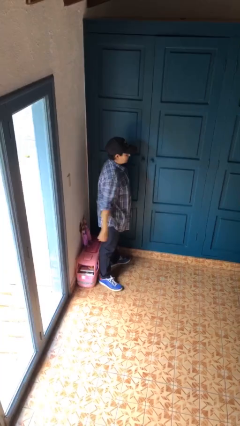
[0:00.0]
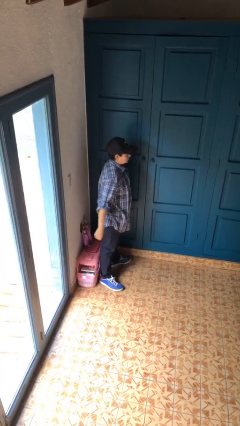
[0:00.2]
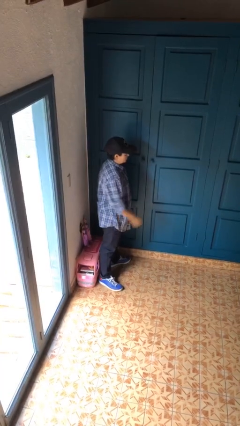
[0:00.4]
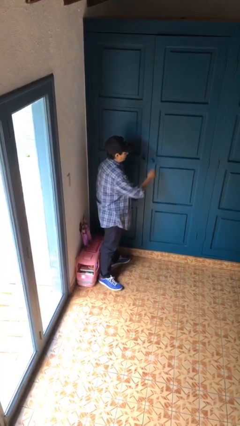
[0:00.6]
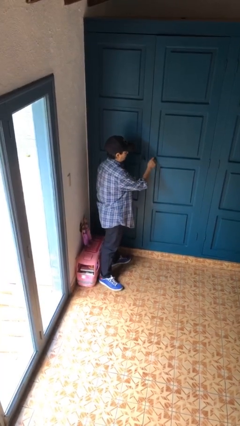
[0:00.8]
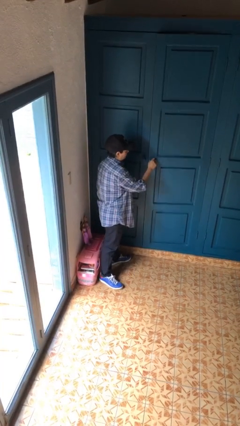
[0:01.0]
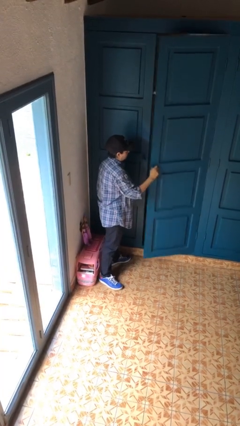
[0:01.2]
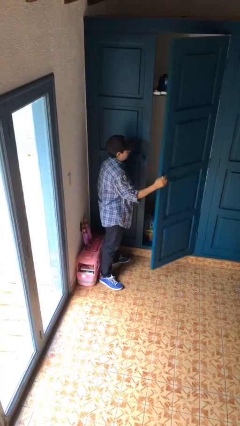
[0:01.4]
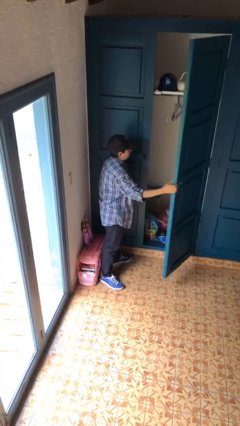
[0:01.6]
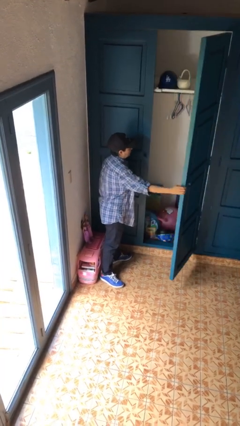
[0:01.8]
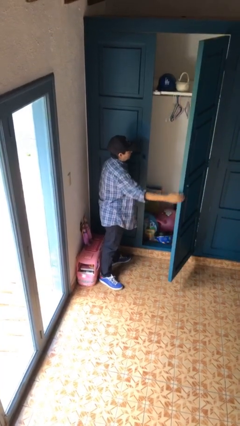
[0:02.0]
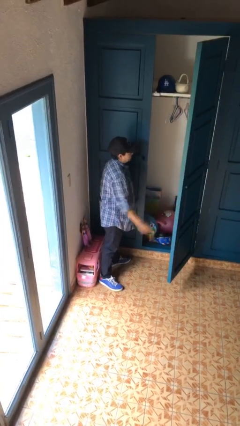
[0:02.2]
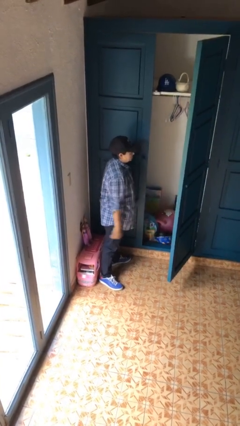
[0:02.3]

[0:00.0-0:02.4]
person opens closet door

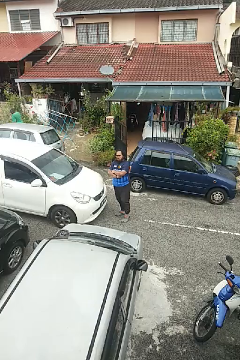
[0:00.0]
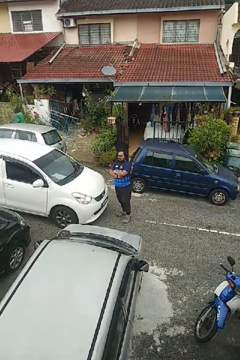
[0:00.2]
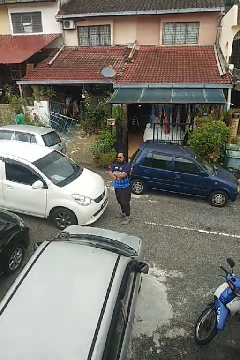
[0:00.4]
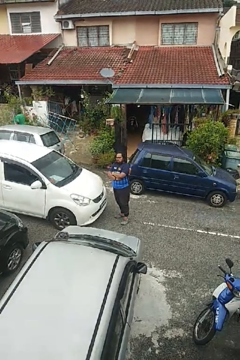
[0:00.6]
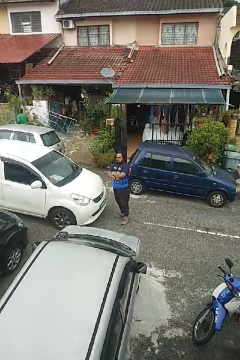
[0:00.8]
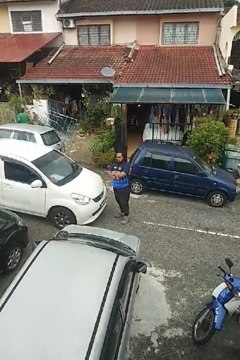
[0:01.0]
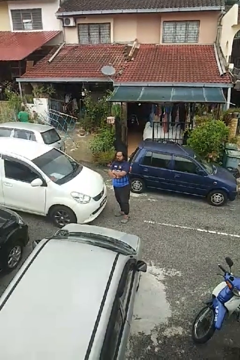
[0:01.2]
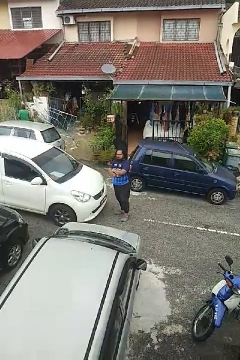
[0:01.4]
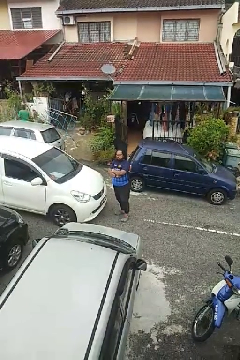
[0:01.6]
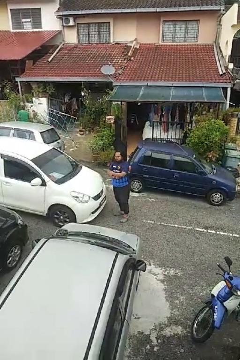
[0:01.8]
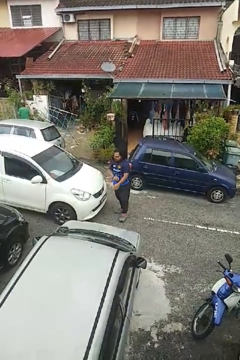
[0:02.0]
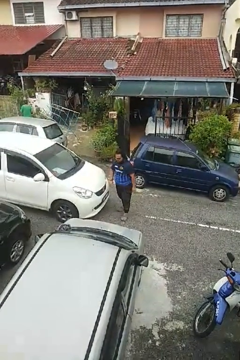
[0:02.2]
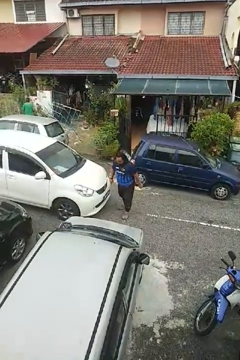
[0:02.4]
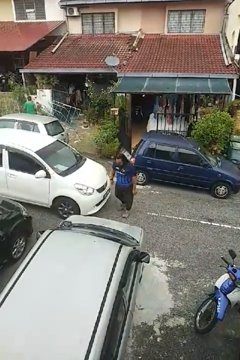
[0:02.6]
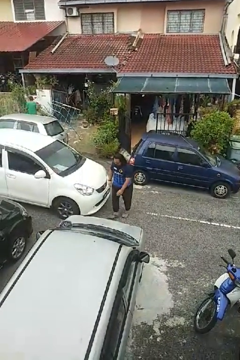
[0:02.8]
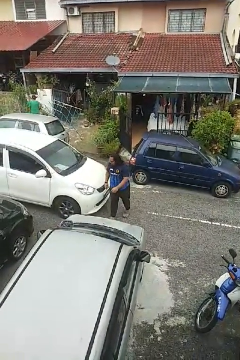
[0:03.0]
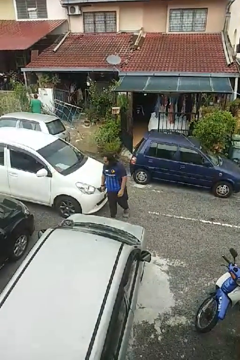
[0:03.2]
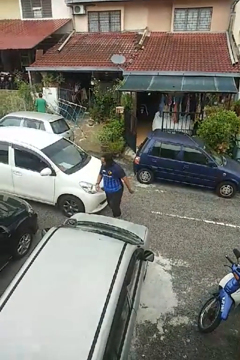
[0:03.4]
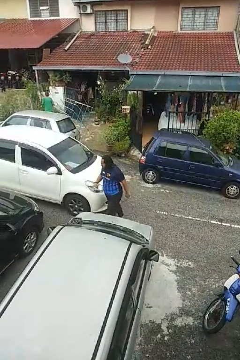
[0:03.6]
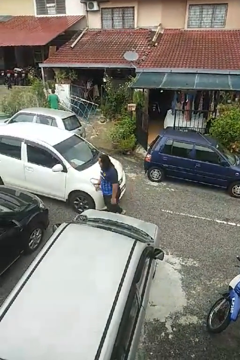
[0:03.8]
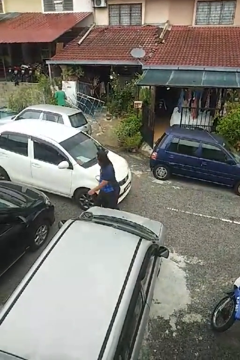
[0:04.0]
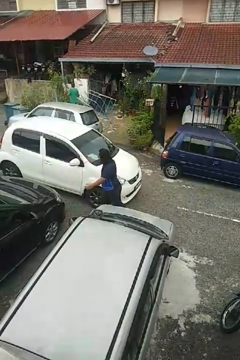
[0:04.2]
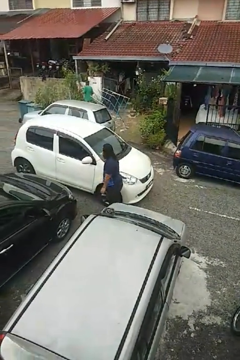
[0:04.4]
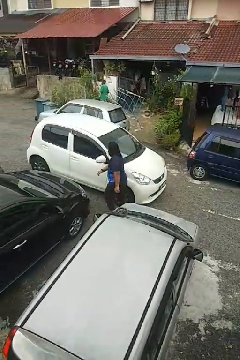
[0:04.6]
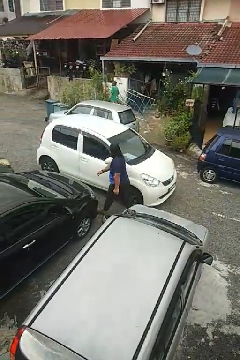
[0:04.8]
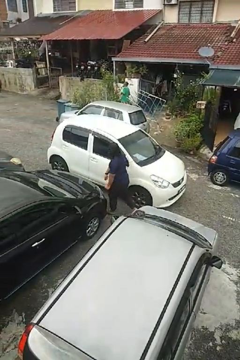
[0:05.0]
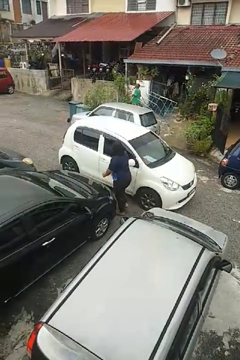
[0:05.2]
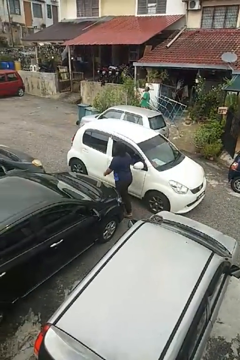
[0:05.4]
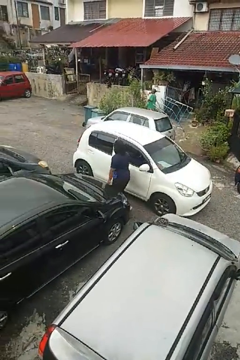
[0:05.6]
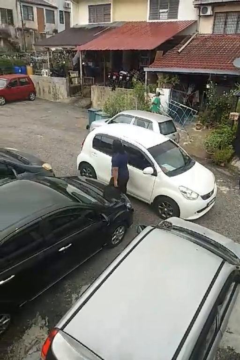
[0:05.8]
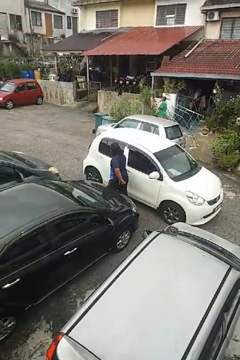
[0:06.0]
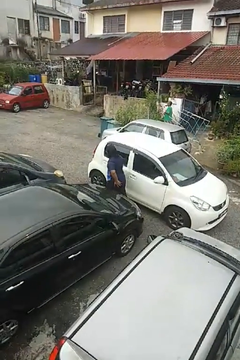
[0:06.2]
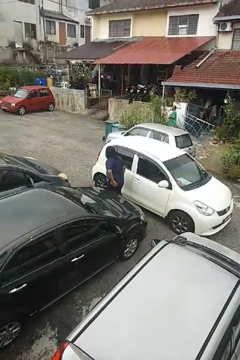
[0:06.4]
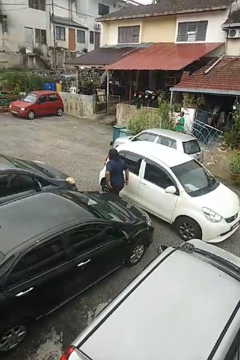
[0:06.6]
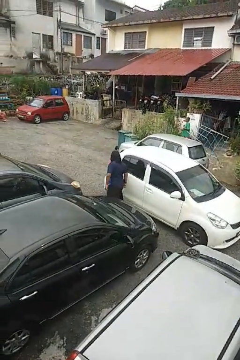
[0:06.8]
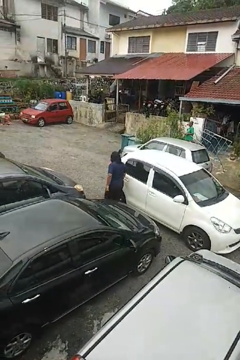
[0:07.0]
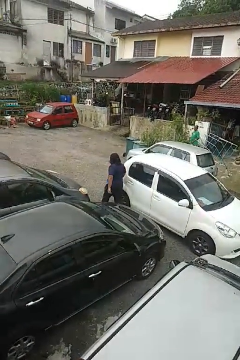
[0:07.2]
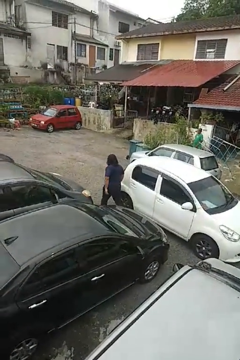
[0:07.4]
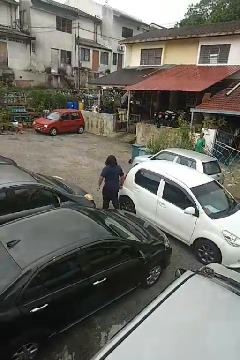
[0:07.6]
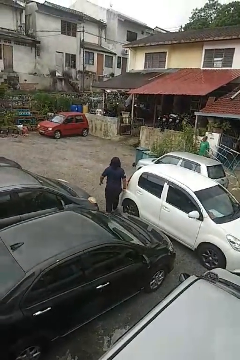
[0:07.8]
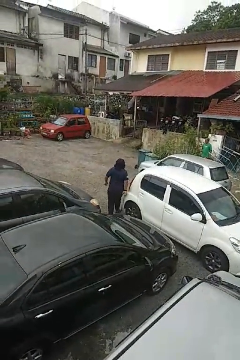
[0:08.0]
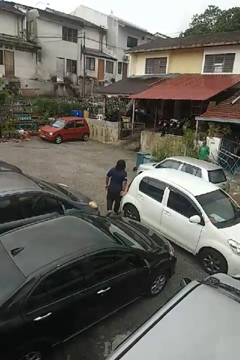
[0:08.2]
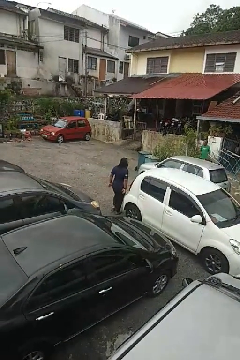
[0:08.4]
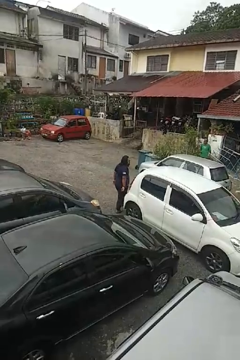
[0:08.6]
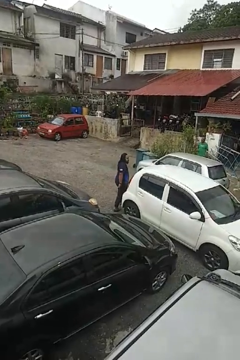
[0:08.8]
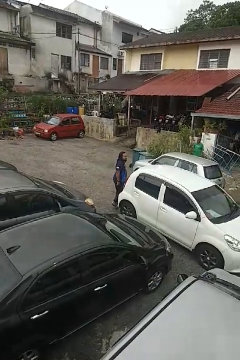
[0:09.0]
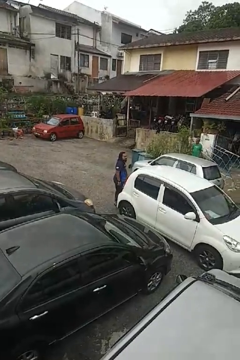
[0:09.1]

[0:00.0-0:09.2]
person walks around car

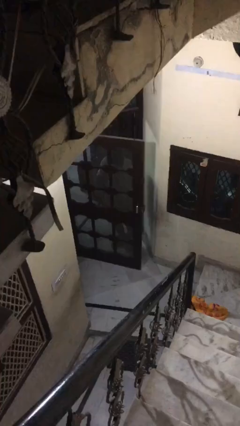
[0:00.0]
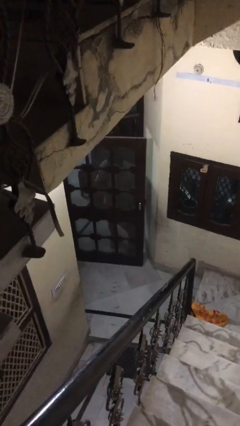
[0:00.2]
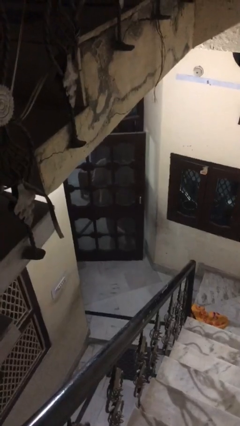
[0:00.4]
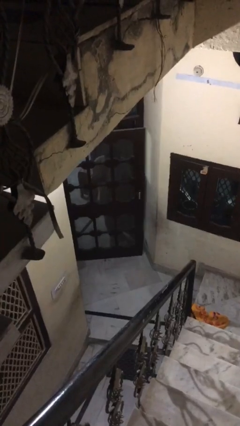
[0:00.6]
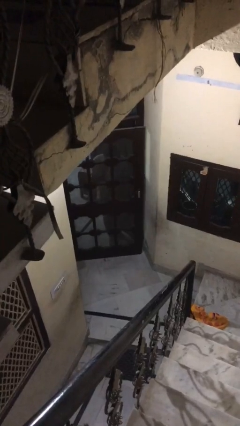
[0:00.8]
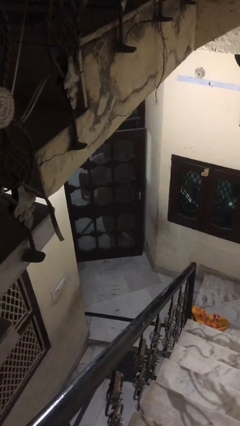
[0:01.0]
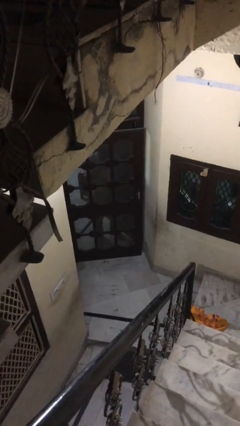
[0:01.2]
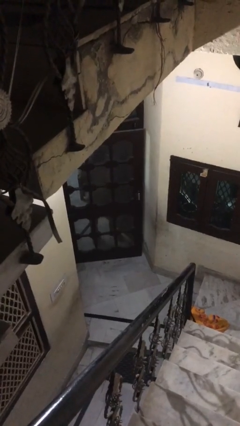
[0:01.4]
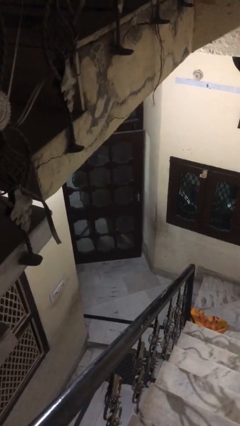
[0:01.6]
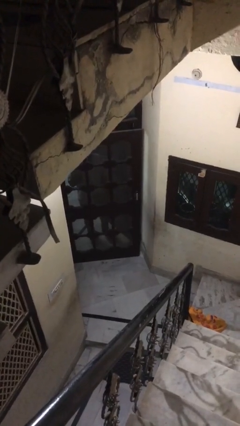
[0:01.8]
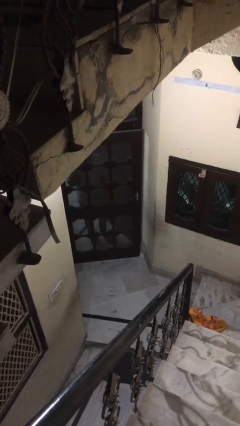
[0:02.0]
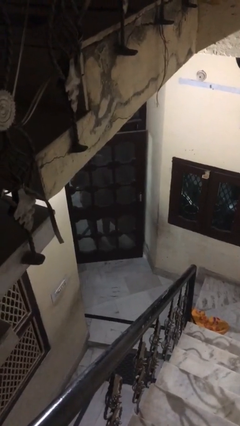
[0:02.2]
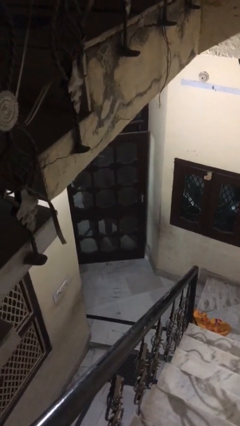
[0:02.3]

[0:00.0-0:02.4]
person closes facility door

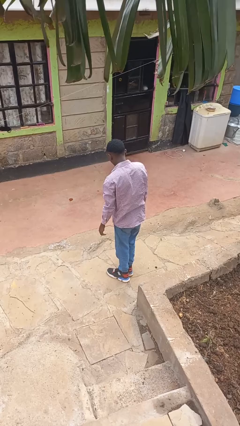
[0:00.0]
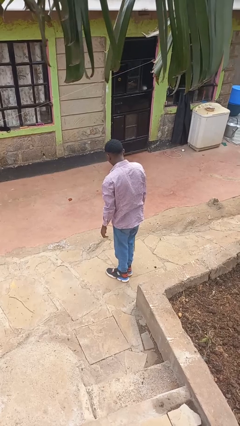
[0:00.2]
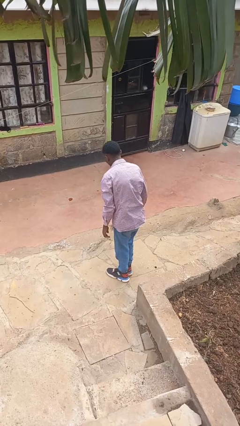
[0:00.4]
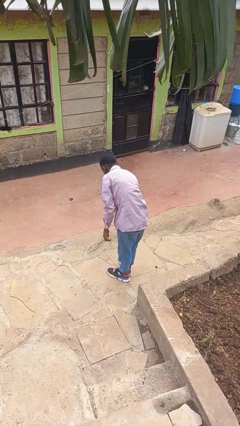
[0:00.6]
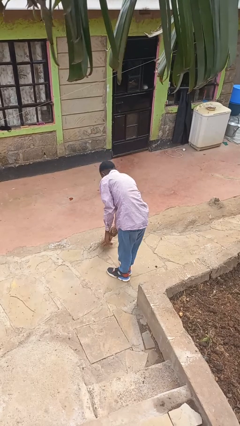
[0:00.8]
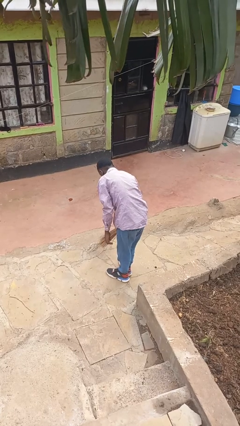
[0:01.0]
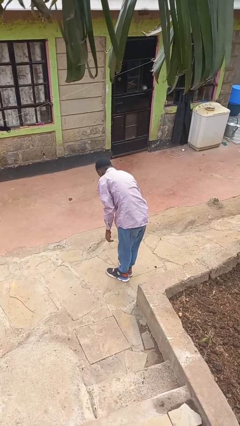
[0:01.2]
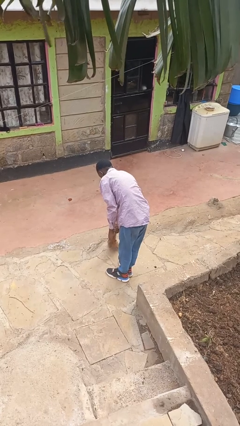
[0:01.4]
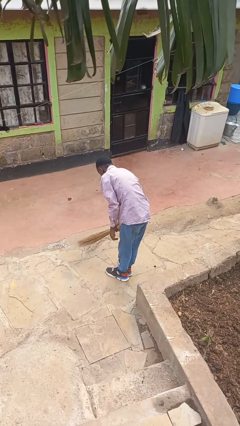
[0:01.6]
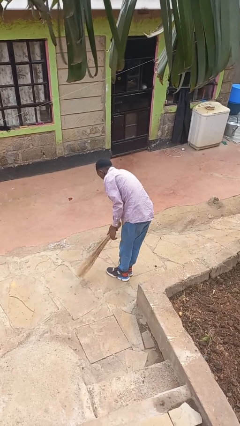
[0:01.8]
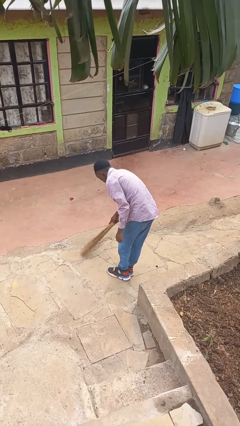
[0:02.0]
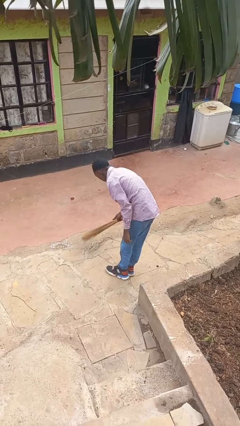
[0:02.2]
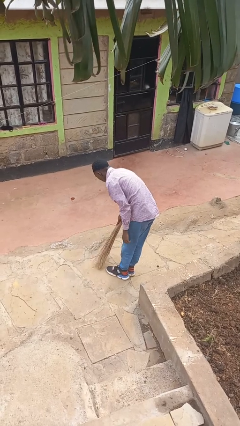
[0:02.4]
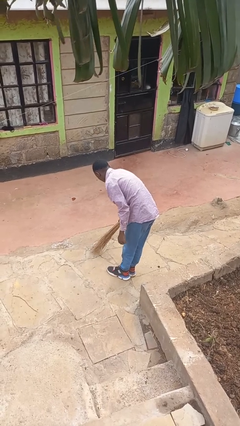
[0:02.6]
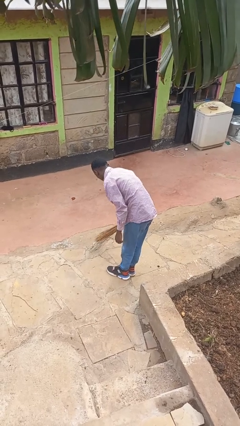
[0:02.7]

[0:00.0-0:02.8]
person sweeps floor

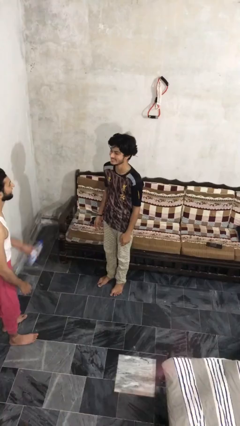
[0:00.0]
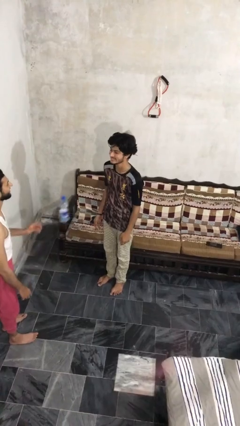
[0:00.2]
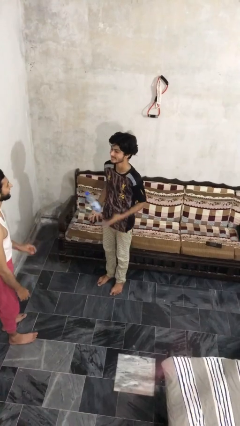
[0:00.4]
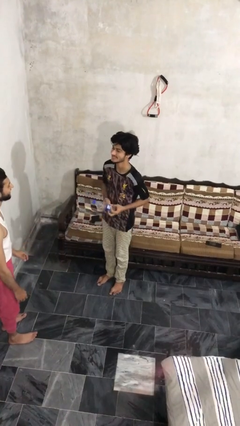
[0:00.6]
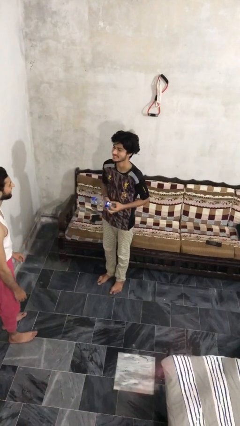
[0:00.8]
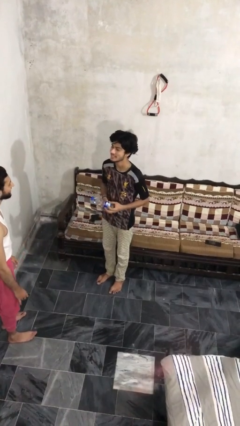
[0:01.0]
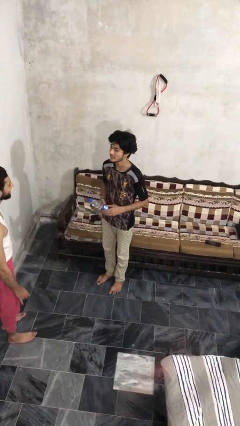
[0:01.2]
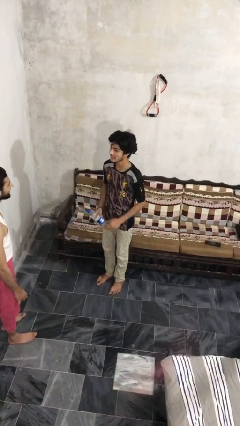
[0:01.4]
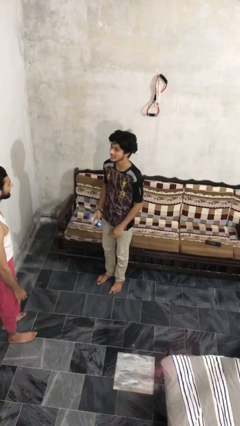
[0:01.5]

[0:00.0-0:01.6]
person catches object from person

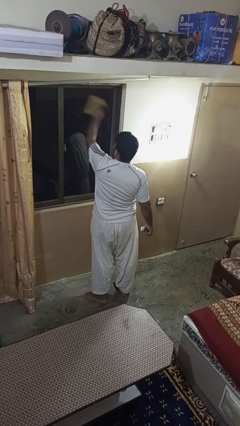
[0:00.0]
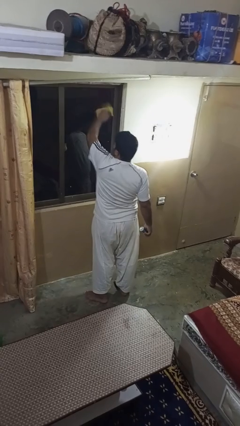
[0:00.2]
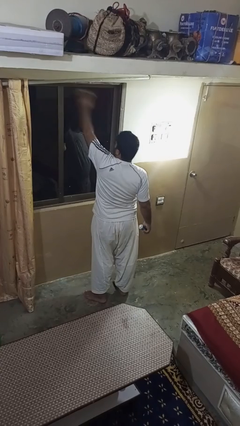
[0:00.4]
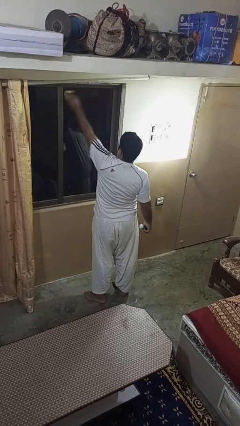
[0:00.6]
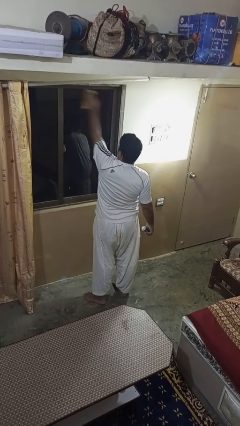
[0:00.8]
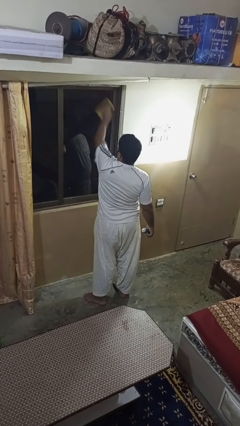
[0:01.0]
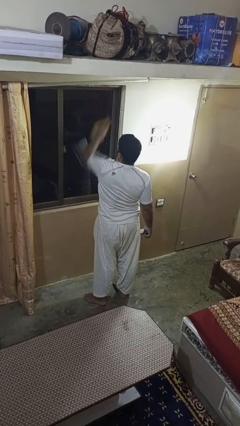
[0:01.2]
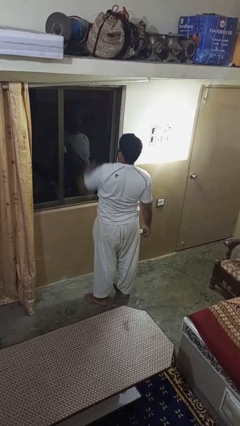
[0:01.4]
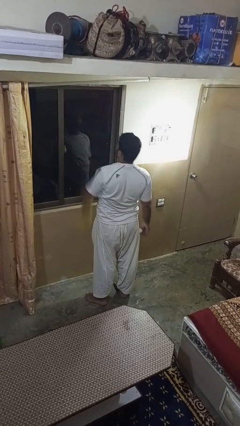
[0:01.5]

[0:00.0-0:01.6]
person washes window
